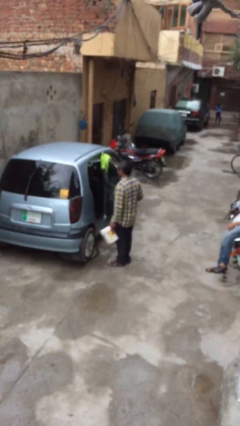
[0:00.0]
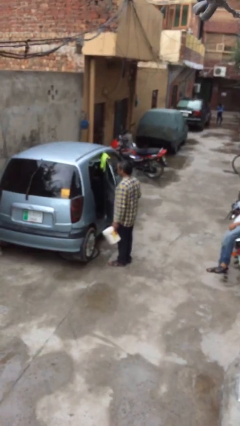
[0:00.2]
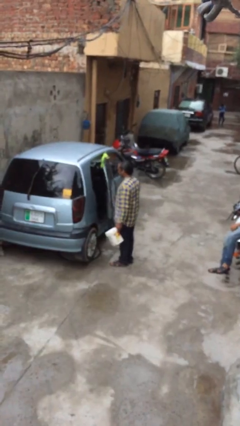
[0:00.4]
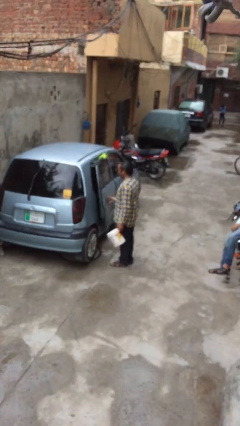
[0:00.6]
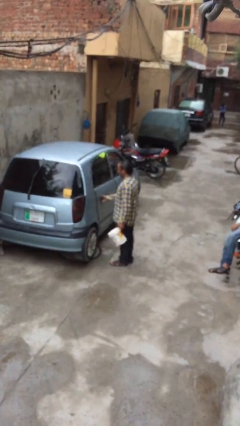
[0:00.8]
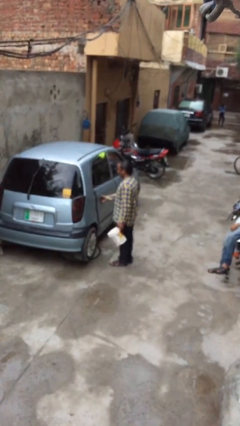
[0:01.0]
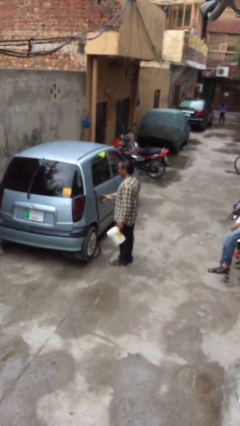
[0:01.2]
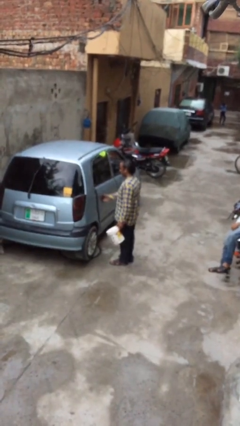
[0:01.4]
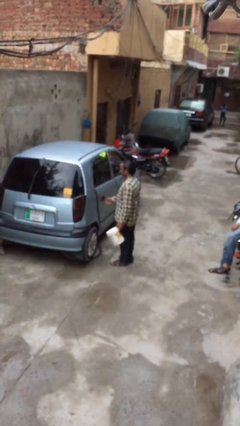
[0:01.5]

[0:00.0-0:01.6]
person closes car door

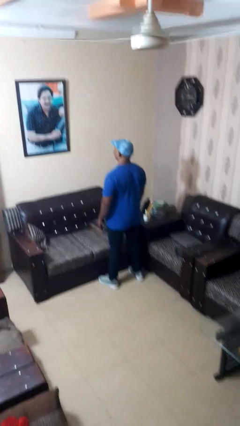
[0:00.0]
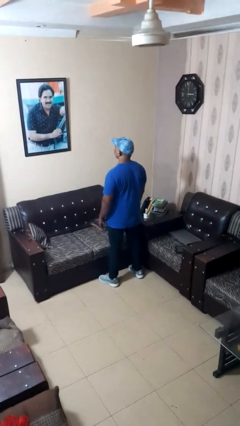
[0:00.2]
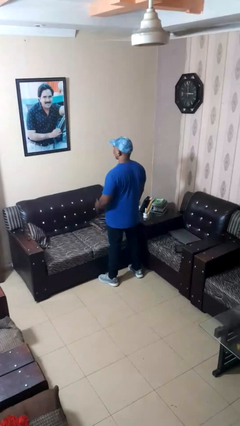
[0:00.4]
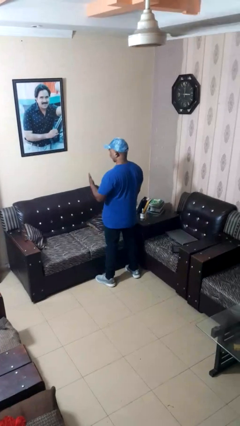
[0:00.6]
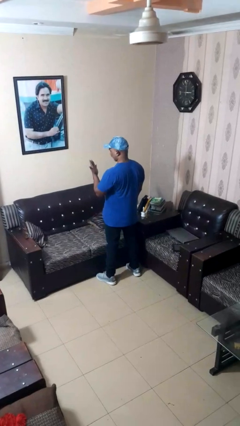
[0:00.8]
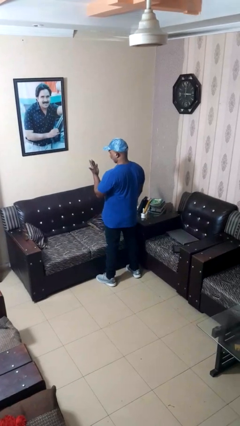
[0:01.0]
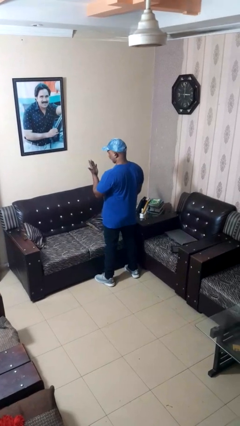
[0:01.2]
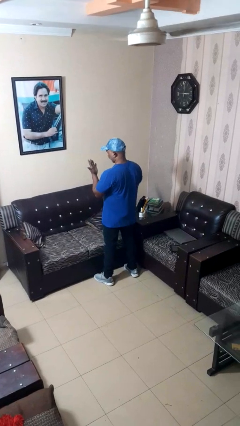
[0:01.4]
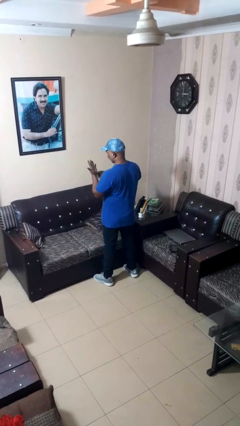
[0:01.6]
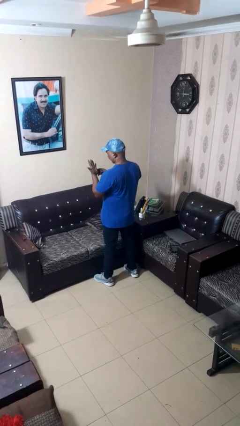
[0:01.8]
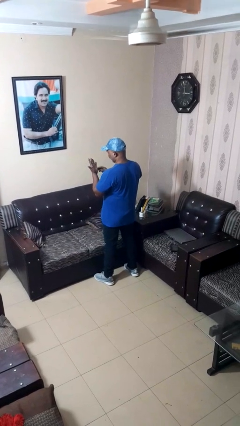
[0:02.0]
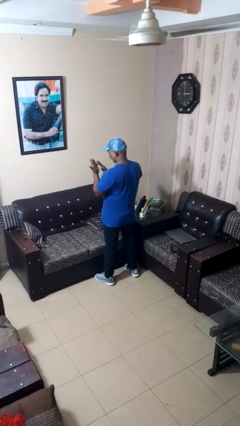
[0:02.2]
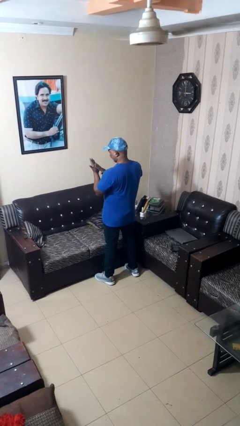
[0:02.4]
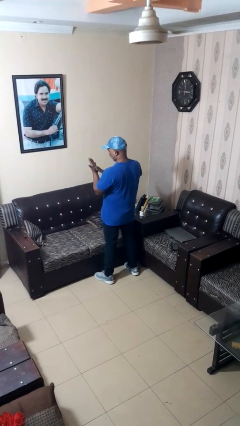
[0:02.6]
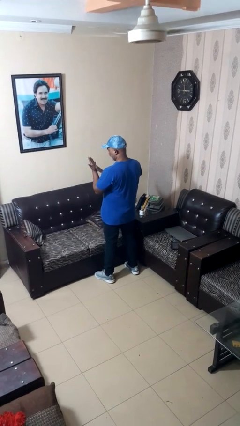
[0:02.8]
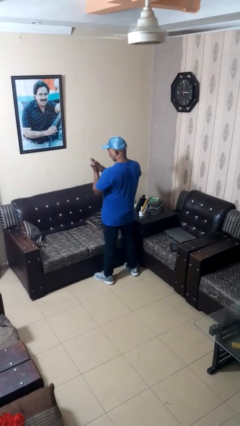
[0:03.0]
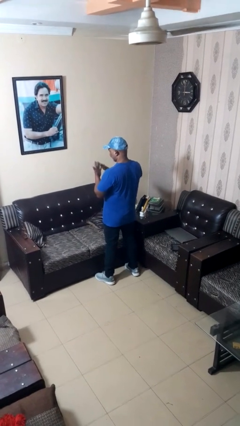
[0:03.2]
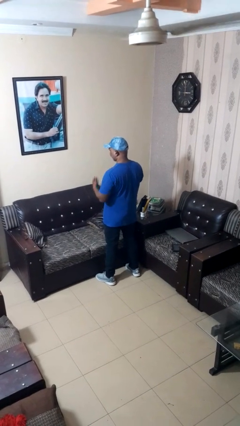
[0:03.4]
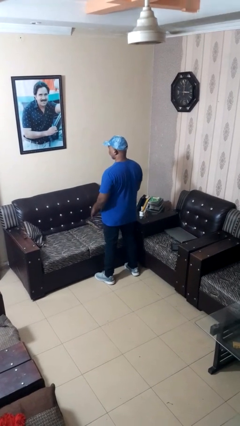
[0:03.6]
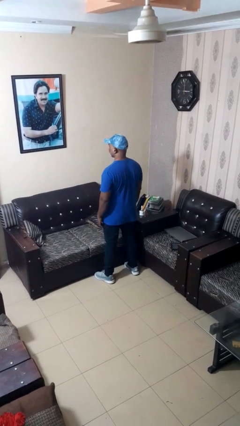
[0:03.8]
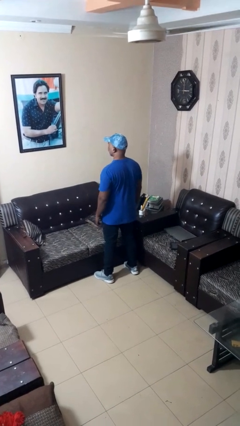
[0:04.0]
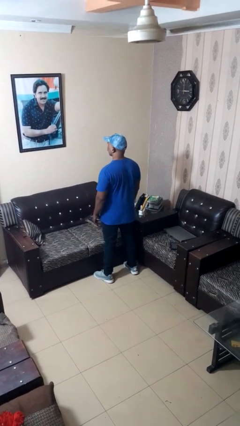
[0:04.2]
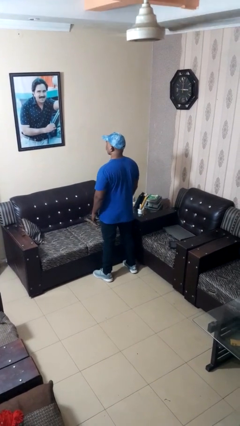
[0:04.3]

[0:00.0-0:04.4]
person looks at hands in lap

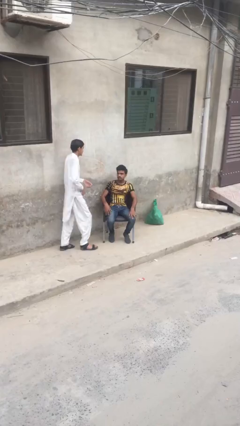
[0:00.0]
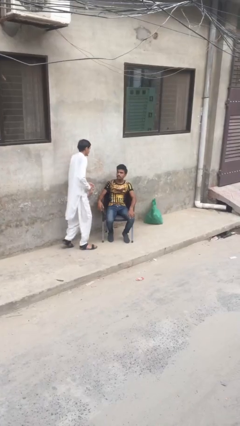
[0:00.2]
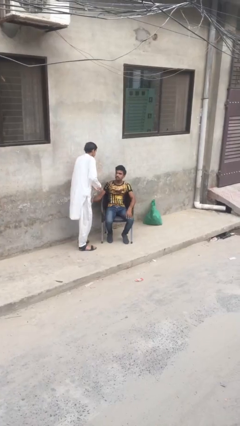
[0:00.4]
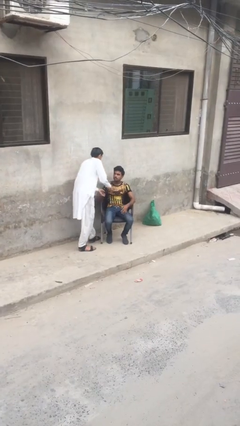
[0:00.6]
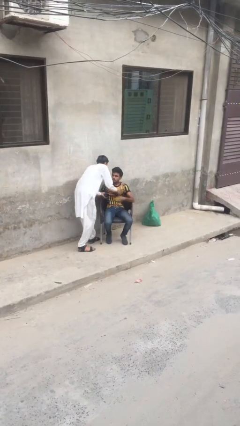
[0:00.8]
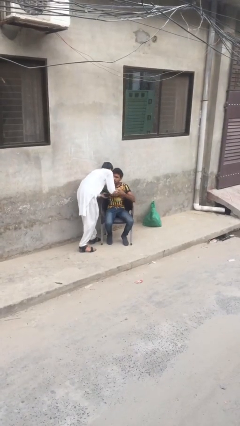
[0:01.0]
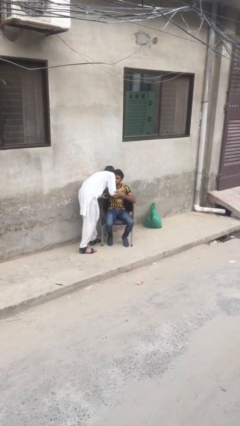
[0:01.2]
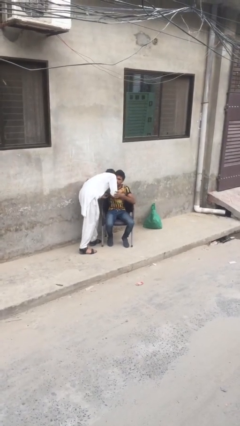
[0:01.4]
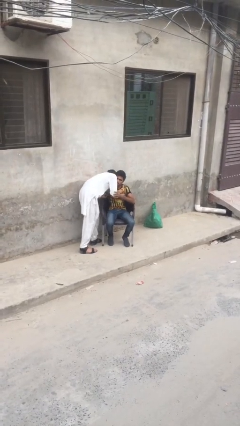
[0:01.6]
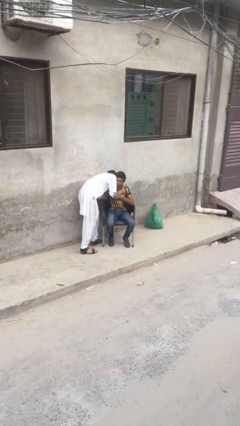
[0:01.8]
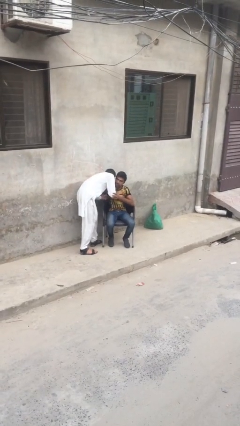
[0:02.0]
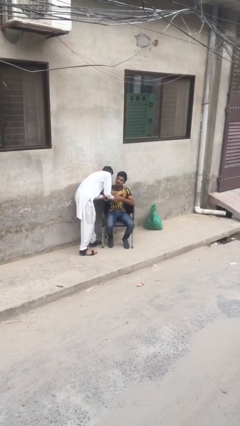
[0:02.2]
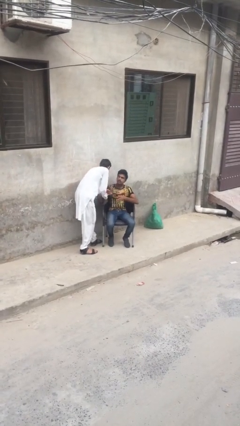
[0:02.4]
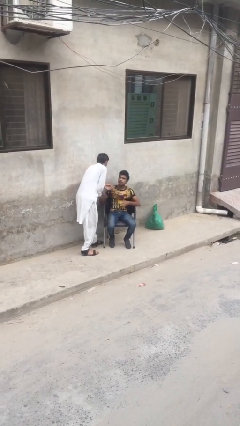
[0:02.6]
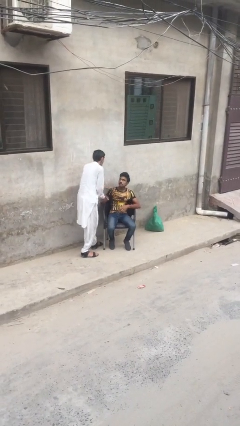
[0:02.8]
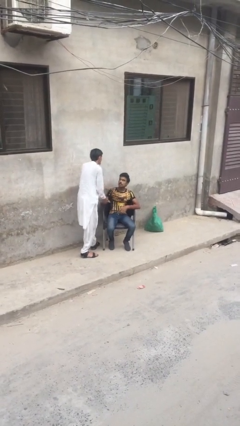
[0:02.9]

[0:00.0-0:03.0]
person embraces person

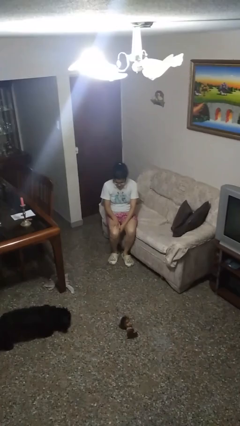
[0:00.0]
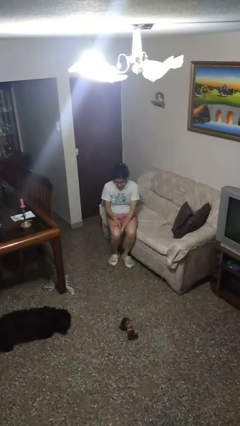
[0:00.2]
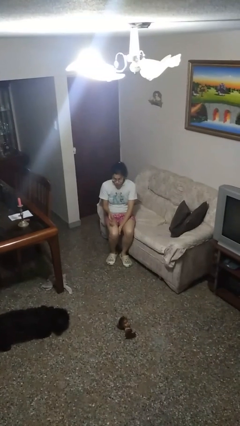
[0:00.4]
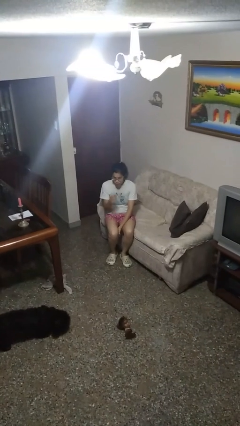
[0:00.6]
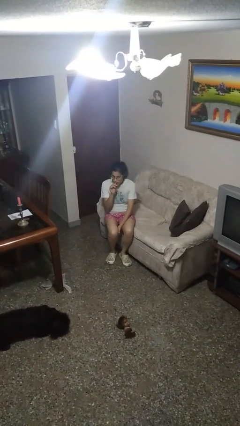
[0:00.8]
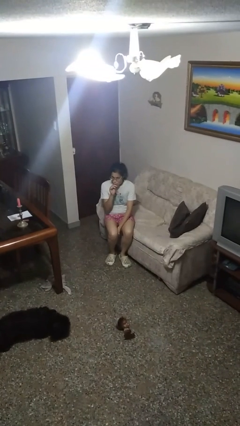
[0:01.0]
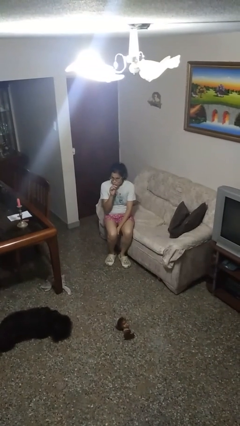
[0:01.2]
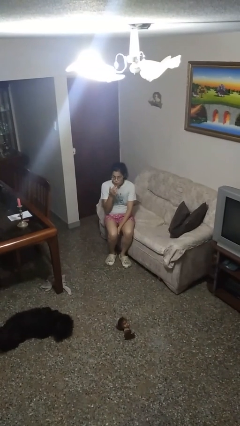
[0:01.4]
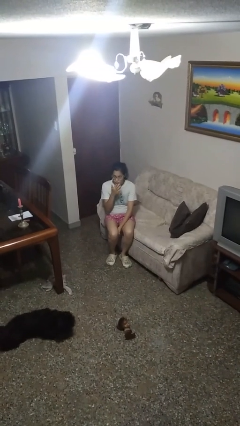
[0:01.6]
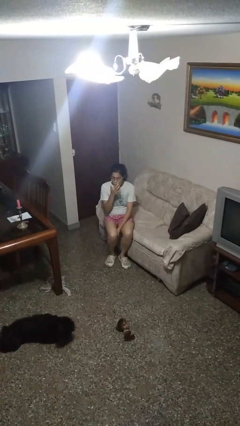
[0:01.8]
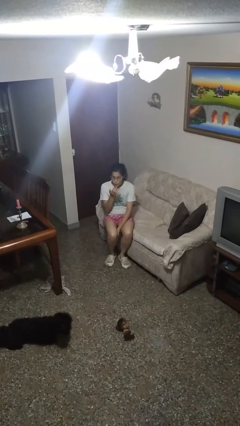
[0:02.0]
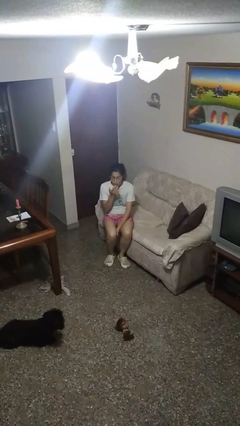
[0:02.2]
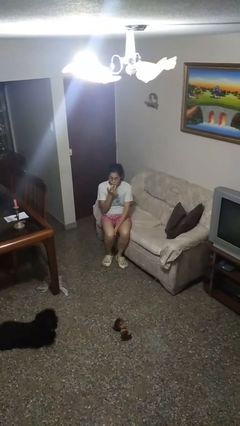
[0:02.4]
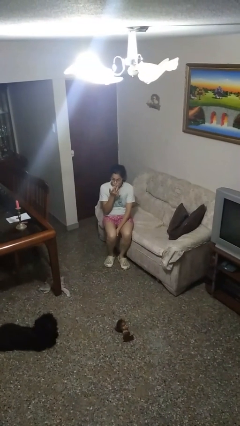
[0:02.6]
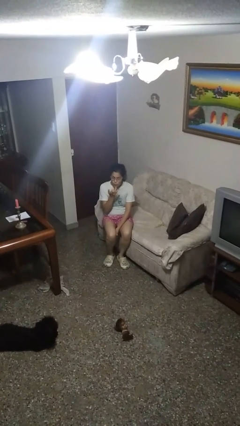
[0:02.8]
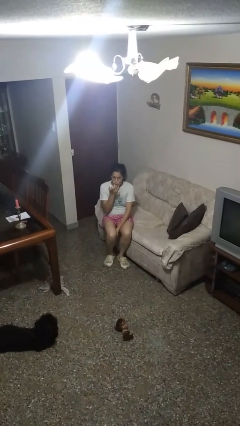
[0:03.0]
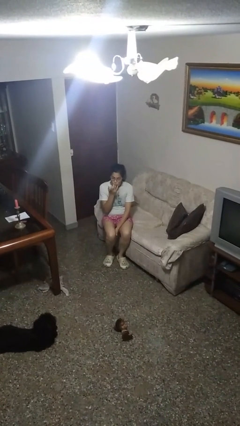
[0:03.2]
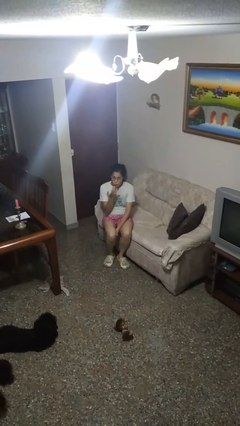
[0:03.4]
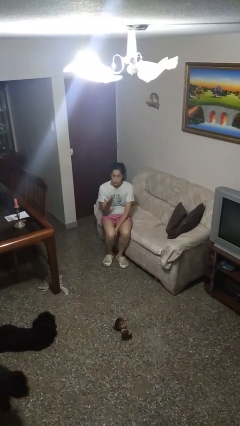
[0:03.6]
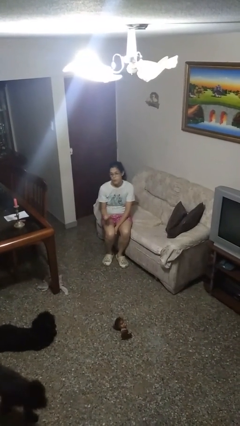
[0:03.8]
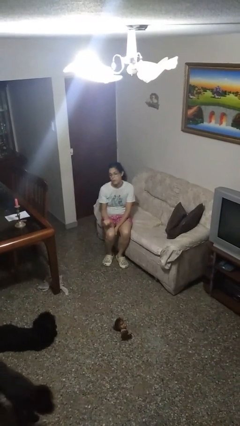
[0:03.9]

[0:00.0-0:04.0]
person licks fingers

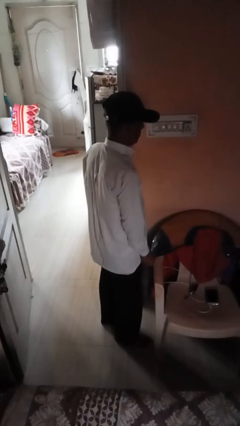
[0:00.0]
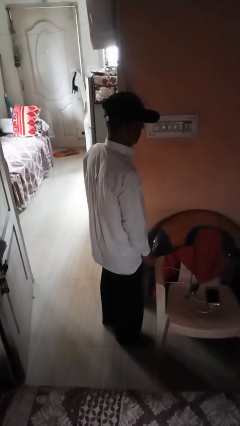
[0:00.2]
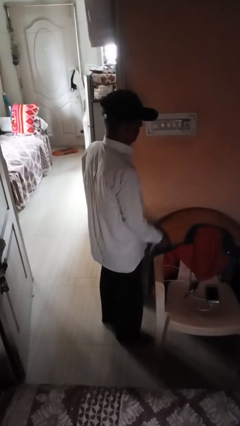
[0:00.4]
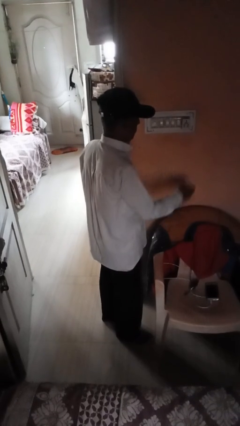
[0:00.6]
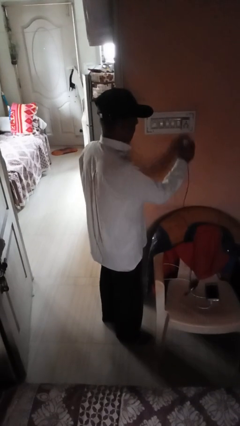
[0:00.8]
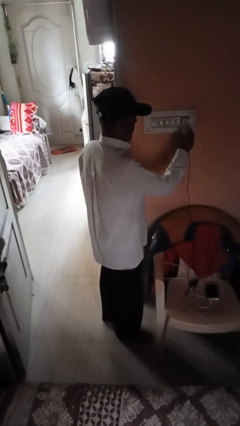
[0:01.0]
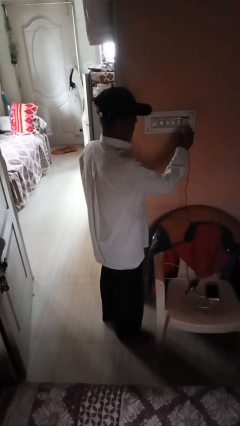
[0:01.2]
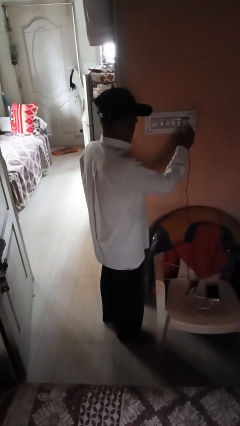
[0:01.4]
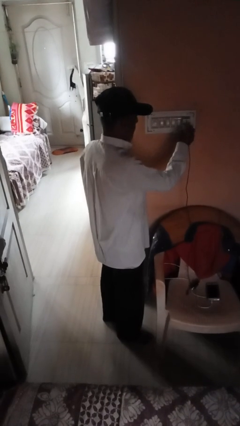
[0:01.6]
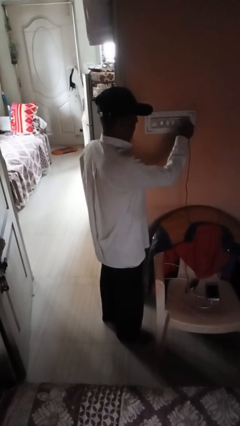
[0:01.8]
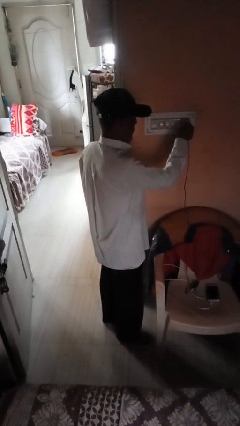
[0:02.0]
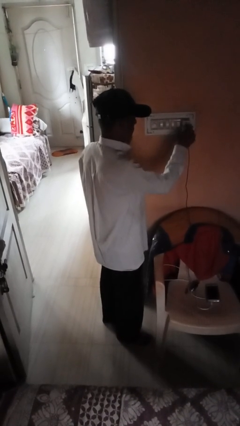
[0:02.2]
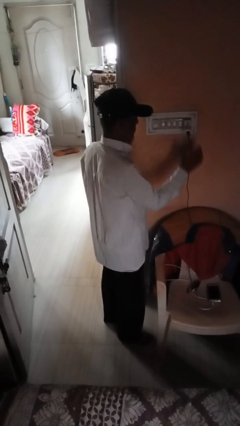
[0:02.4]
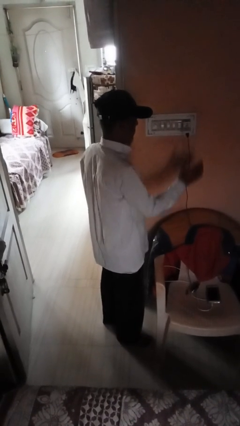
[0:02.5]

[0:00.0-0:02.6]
person plugs into electrical socket

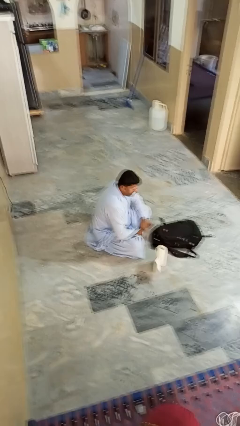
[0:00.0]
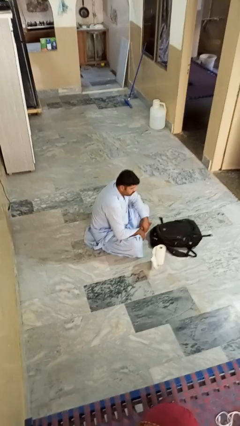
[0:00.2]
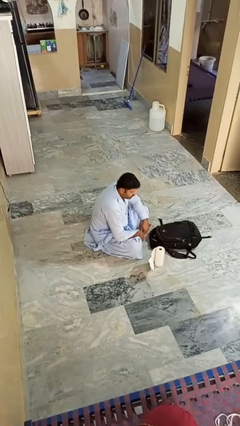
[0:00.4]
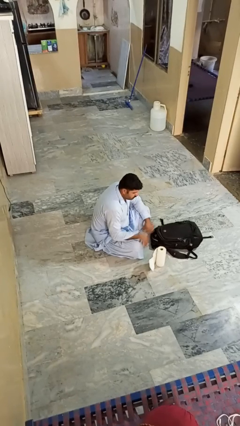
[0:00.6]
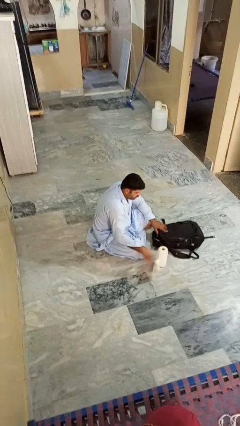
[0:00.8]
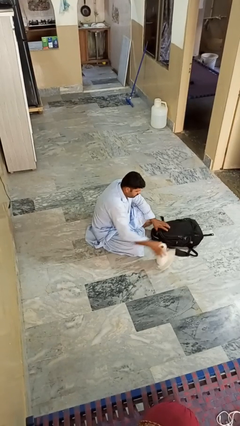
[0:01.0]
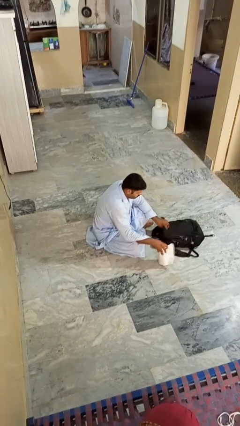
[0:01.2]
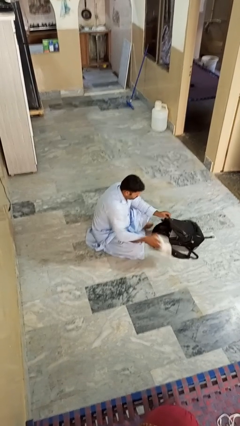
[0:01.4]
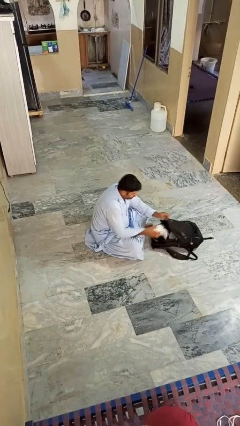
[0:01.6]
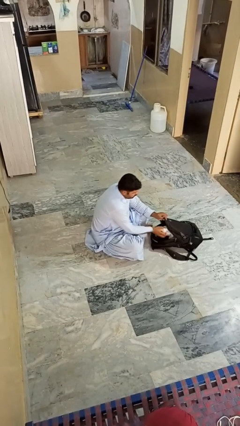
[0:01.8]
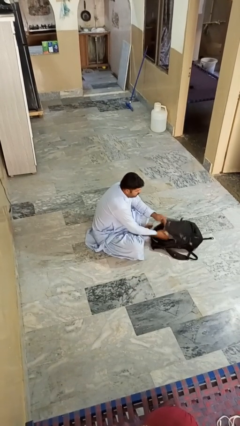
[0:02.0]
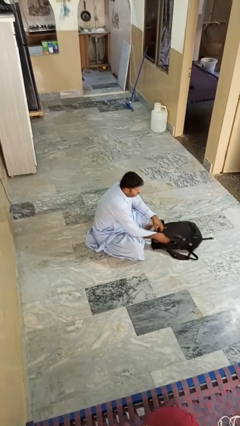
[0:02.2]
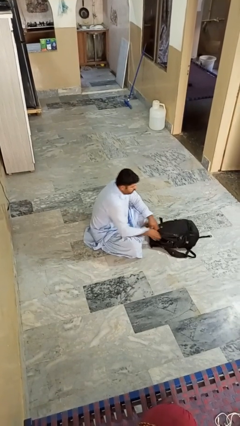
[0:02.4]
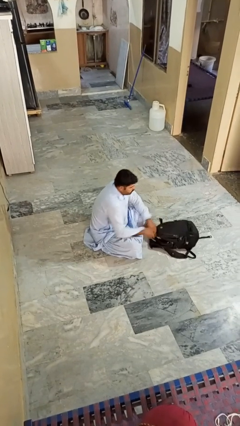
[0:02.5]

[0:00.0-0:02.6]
person puts object into bag
